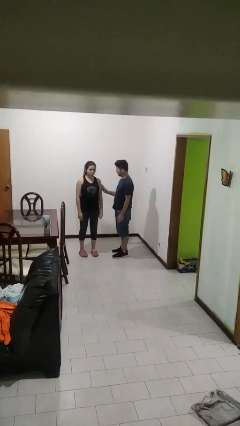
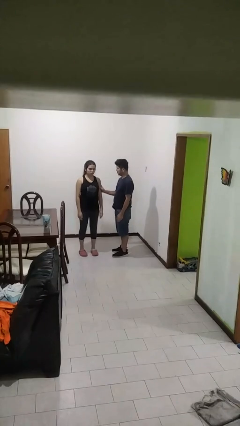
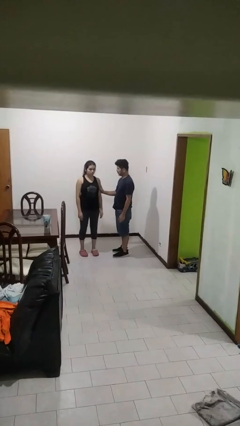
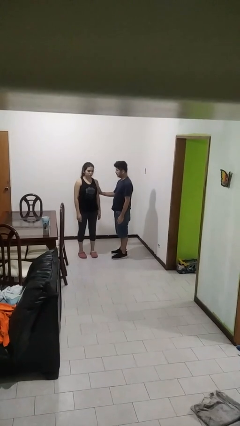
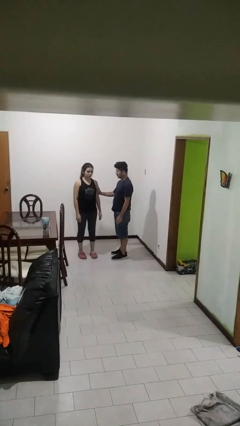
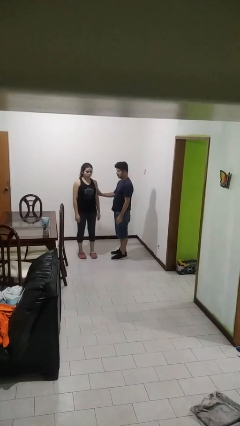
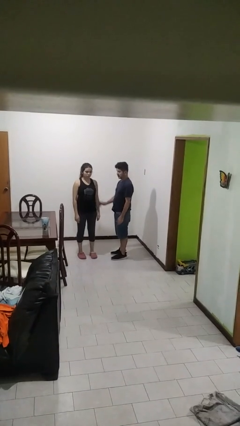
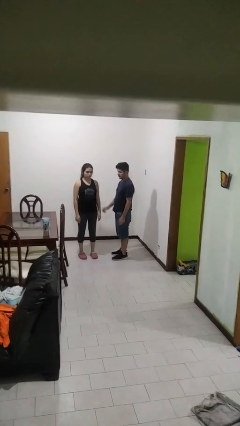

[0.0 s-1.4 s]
person grabs person by bicep

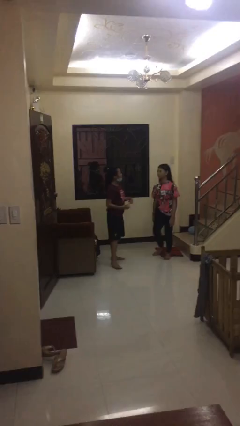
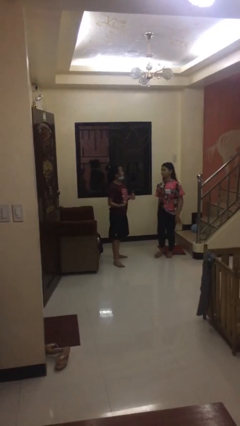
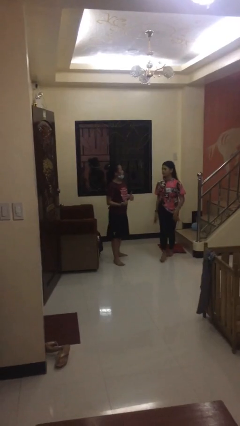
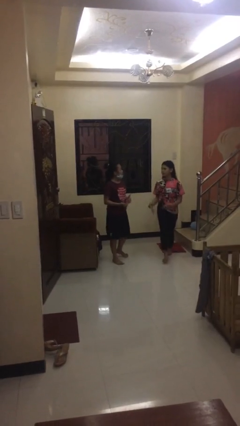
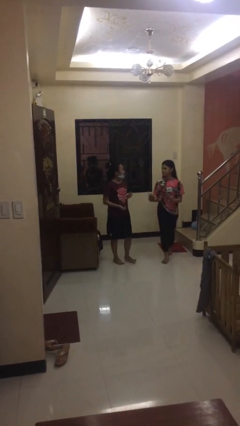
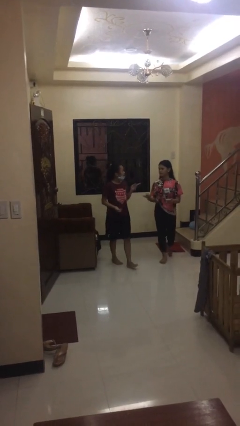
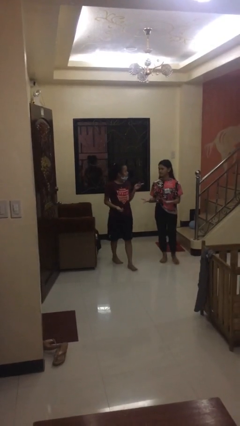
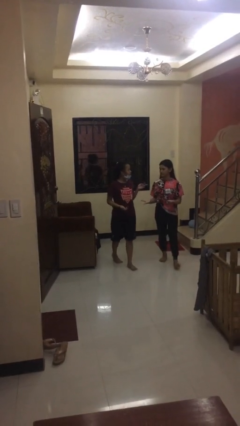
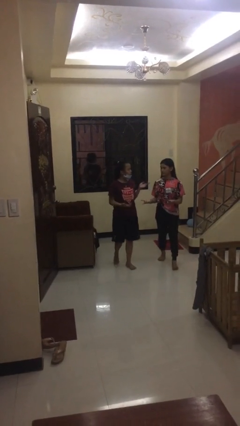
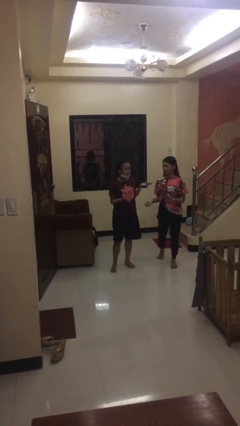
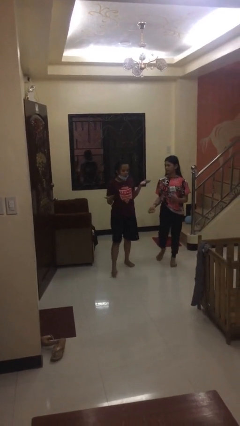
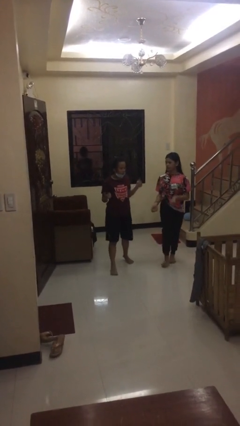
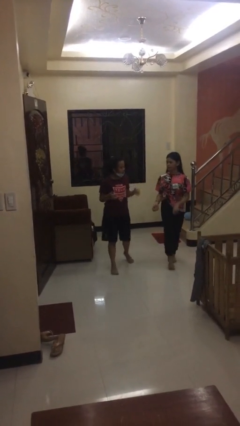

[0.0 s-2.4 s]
person talks to person

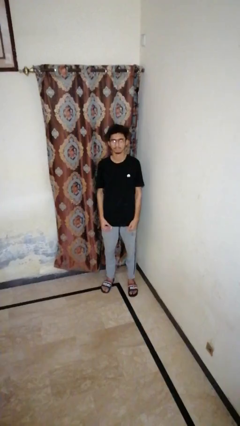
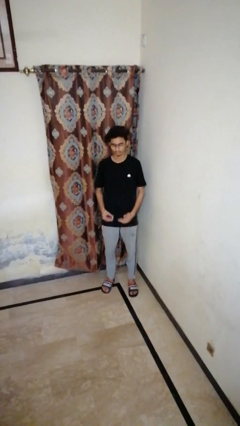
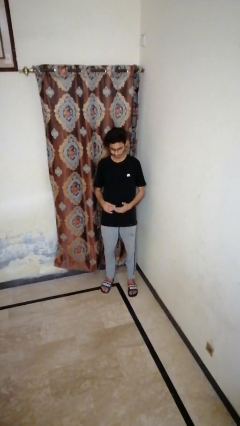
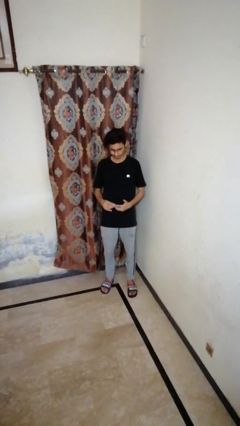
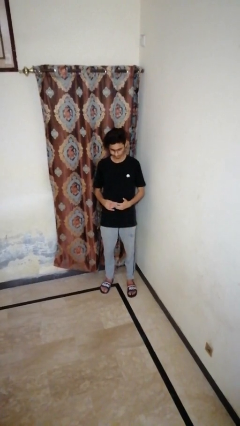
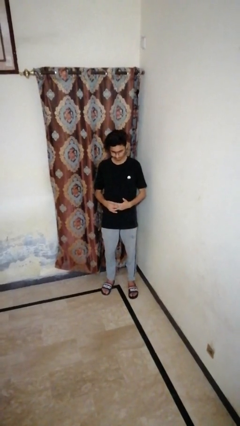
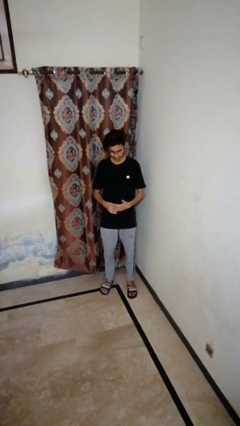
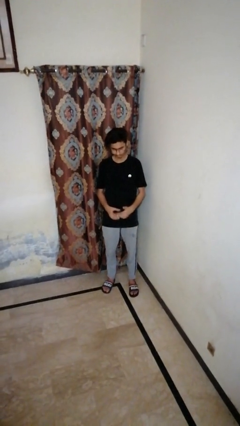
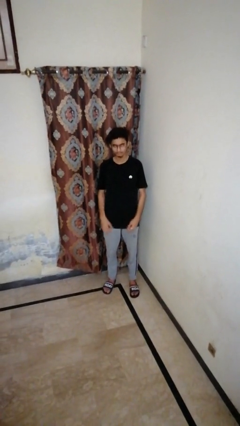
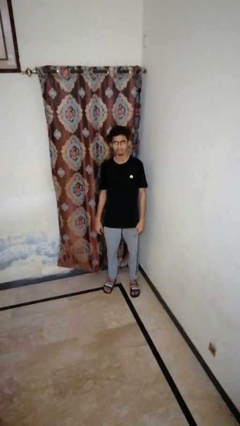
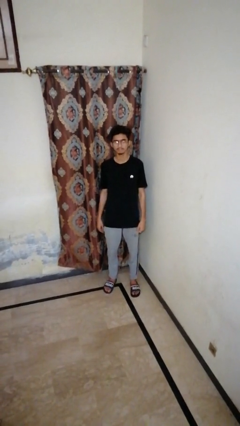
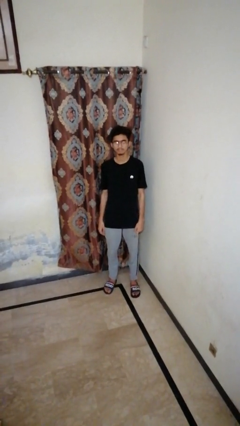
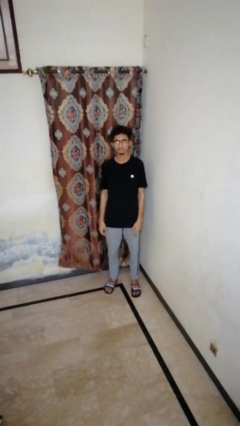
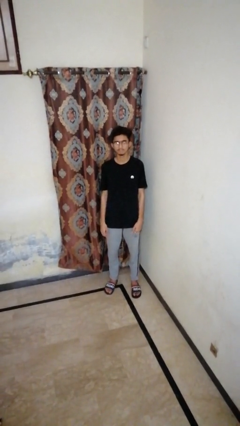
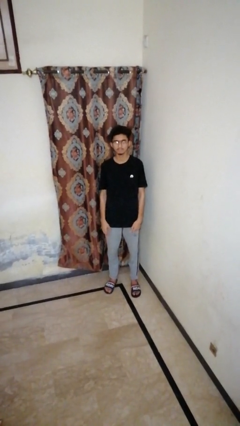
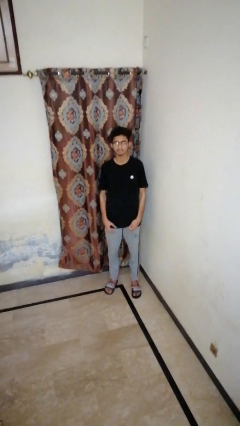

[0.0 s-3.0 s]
person puts on ring

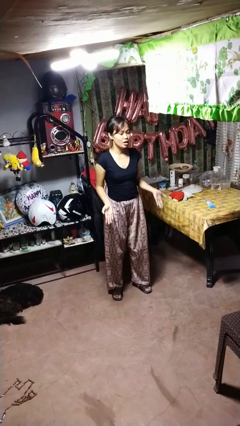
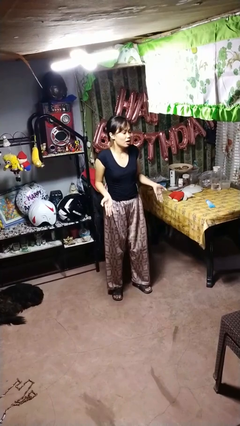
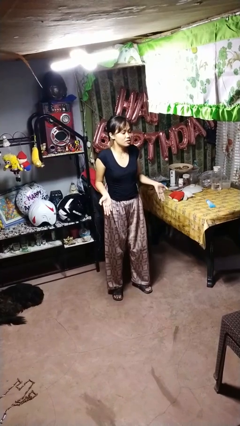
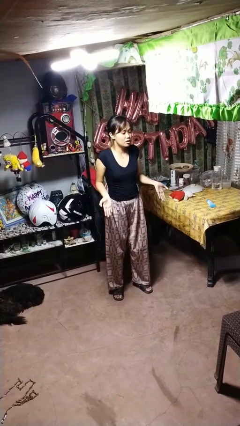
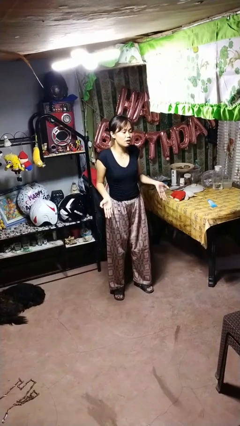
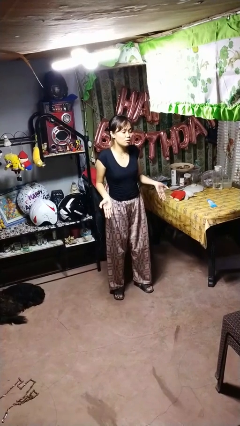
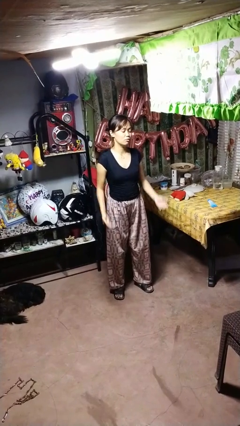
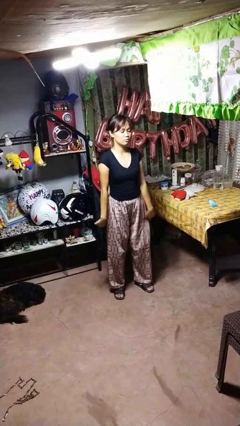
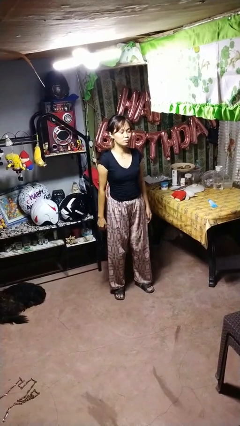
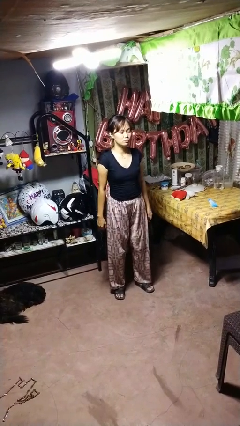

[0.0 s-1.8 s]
person shrugs

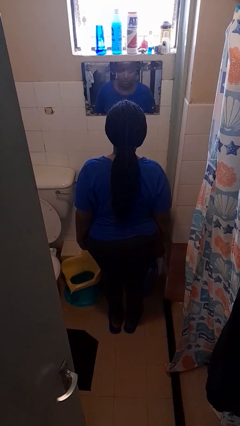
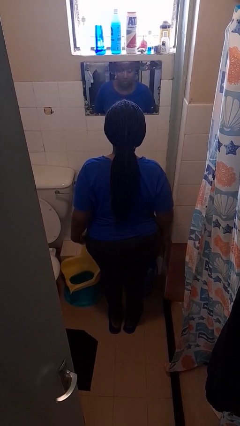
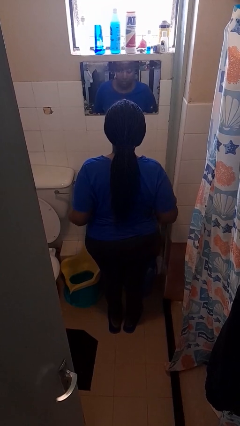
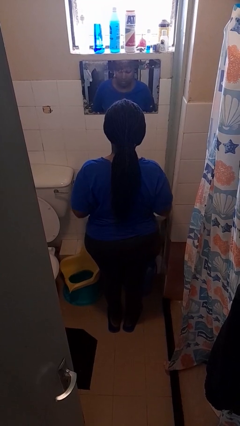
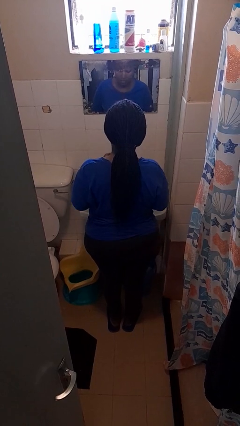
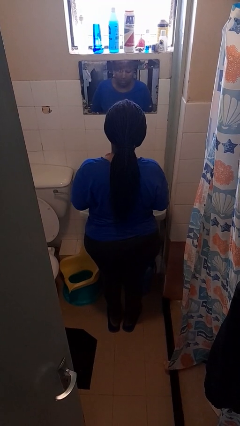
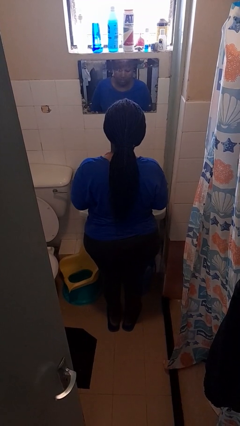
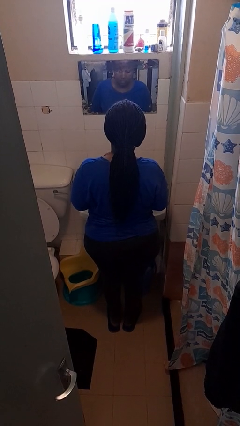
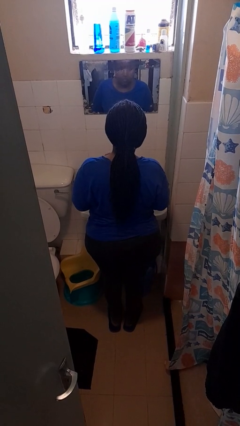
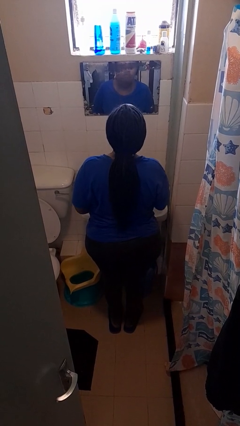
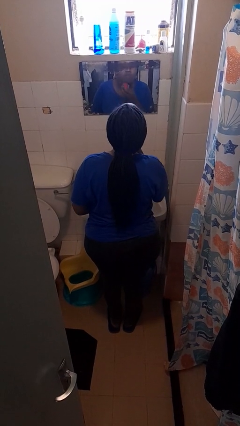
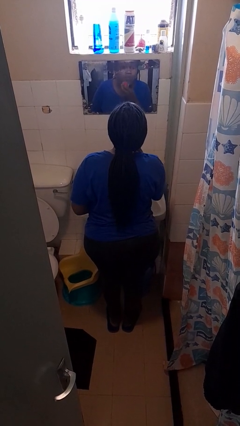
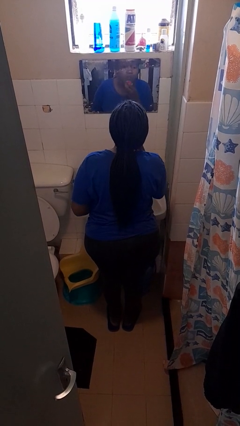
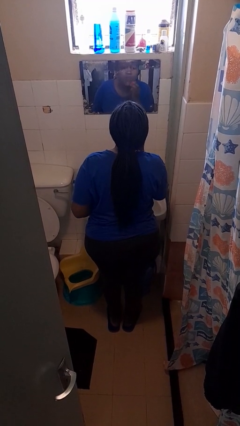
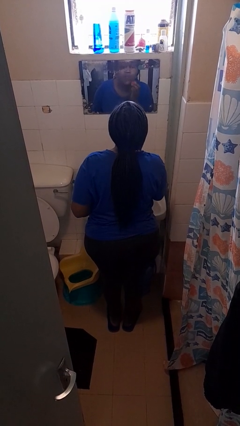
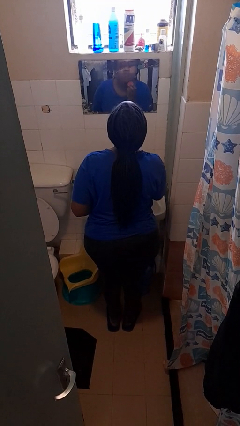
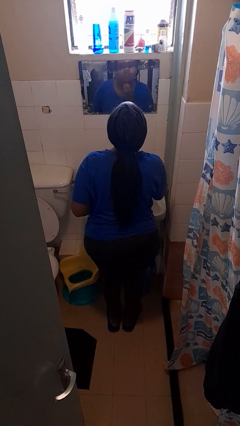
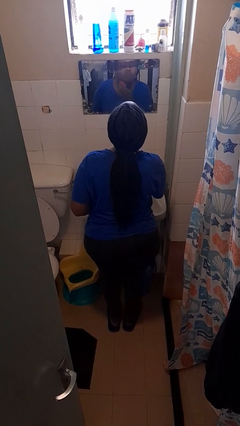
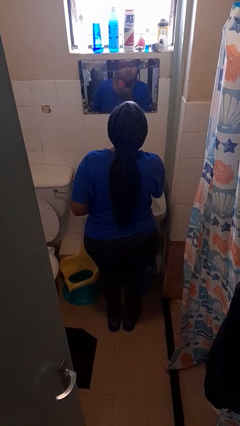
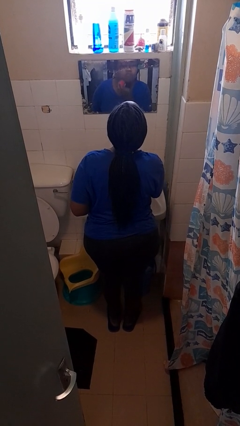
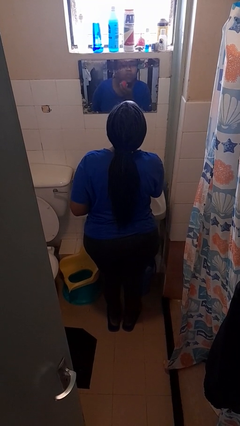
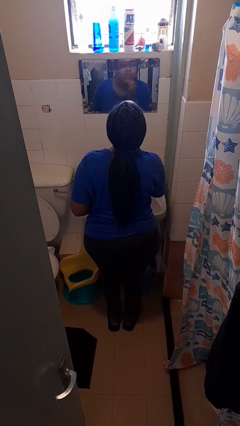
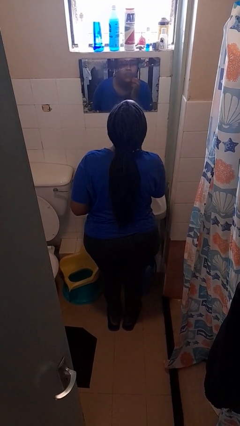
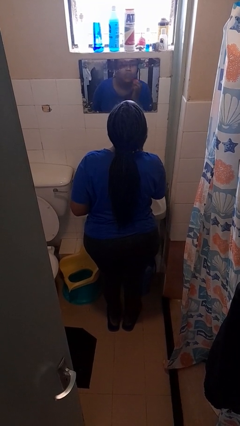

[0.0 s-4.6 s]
person applies foundation makeup

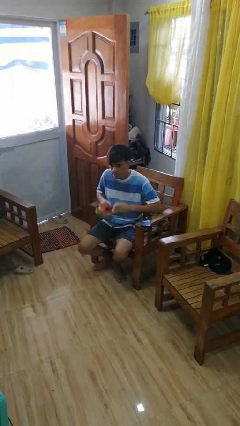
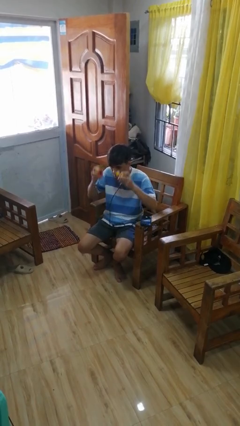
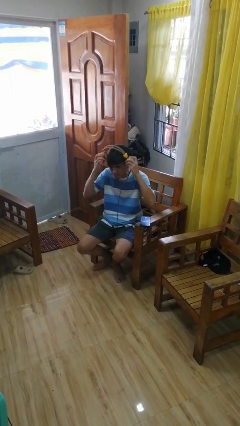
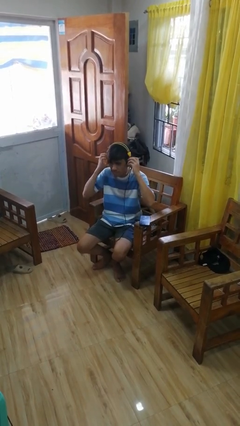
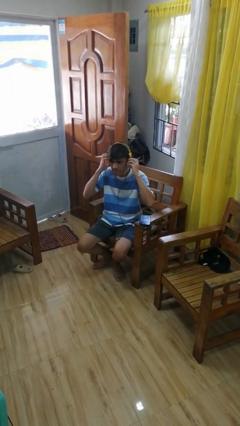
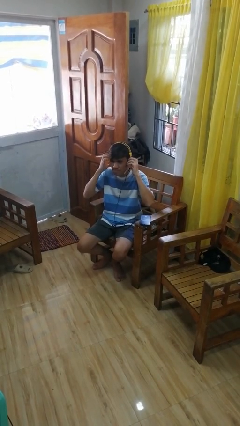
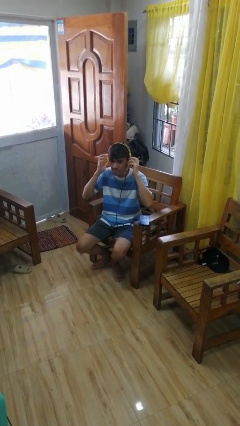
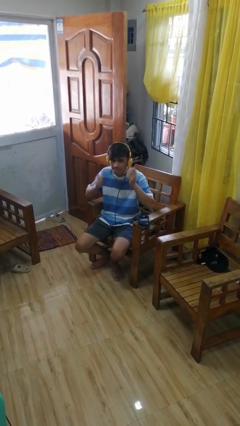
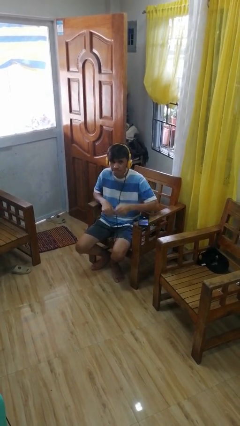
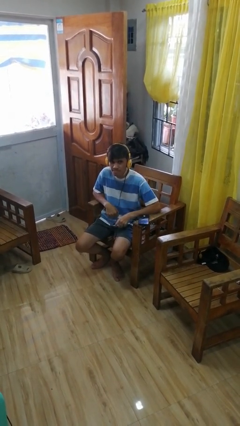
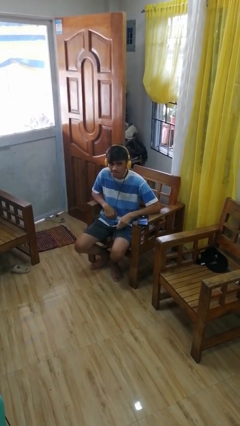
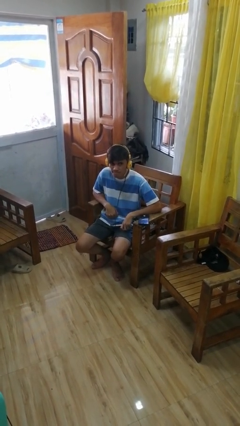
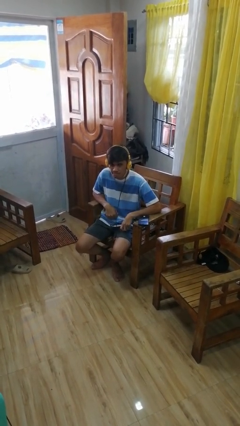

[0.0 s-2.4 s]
person puts on headphones

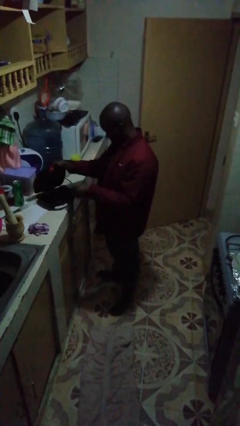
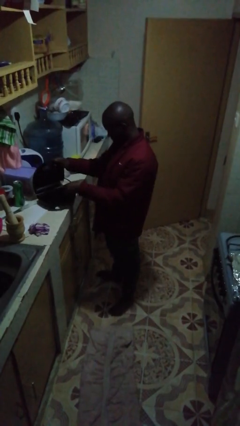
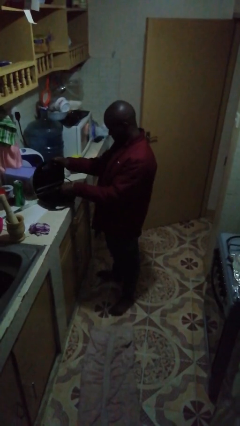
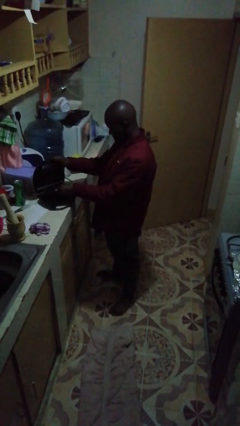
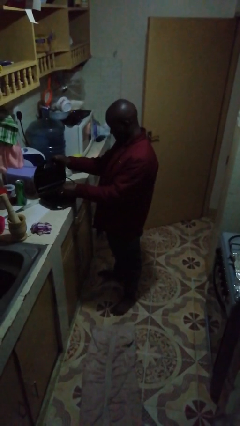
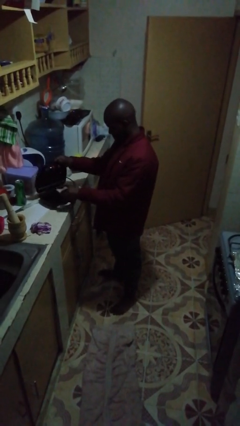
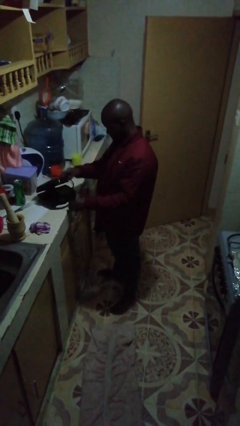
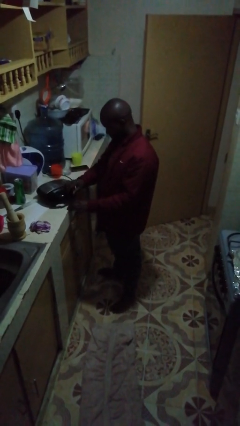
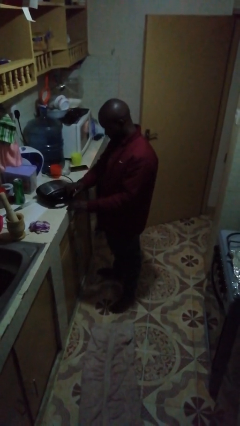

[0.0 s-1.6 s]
person puts object into toaster
